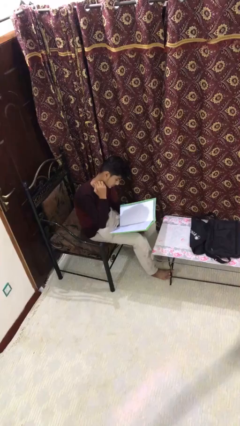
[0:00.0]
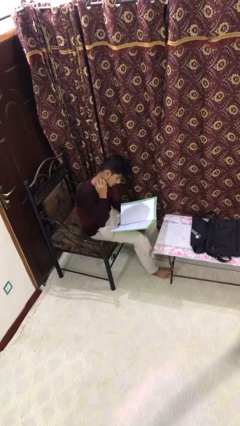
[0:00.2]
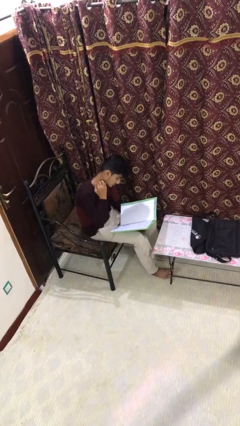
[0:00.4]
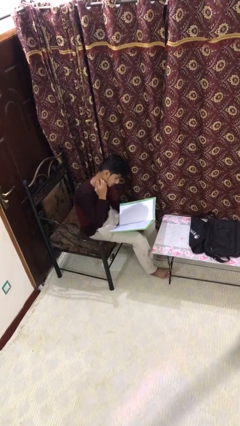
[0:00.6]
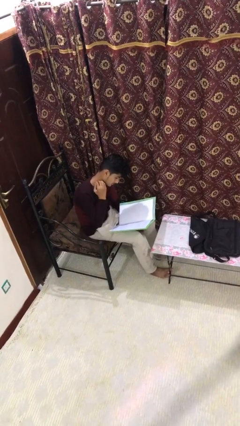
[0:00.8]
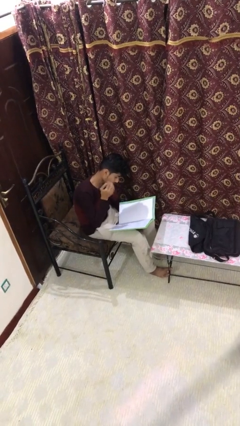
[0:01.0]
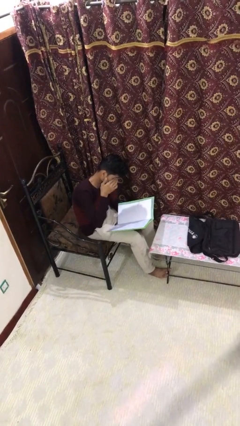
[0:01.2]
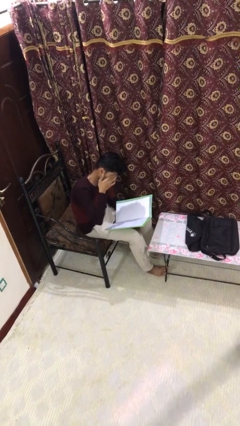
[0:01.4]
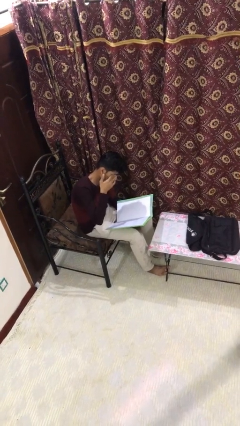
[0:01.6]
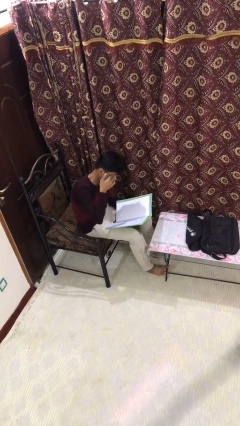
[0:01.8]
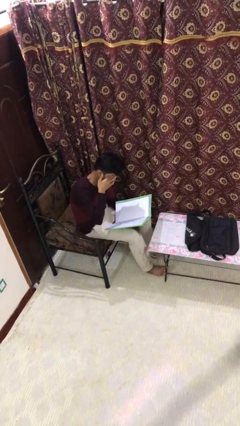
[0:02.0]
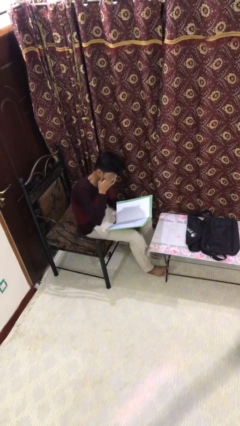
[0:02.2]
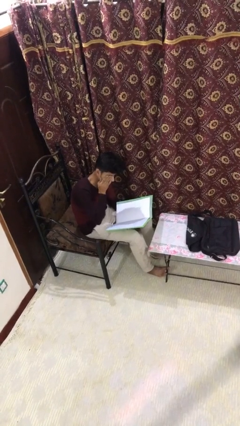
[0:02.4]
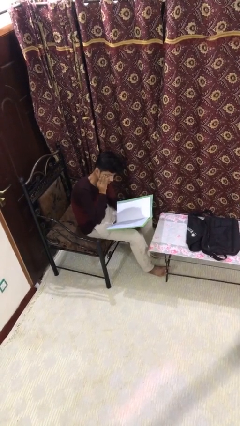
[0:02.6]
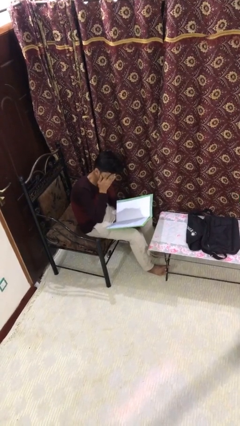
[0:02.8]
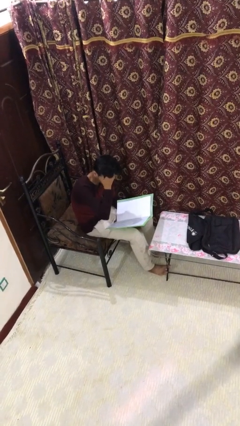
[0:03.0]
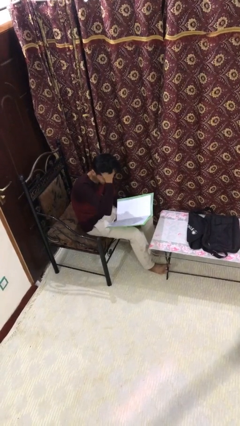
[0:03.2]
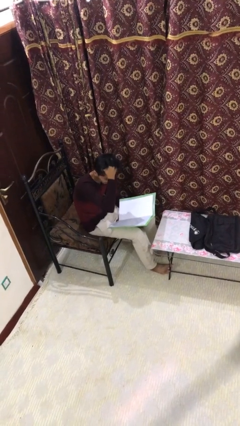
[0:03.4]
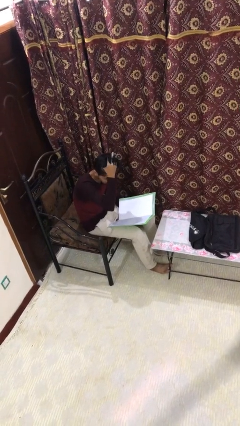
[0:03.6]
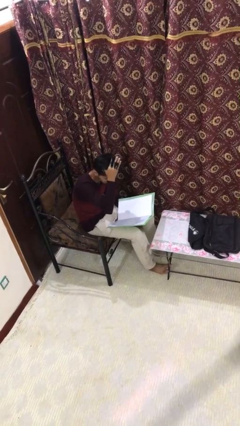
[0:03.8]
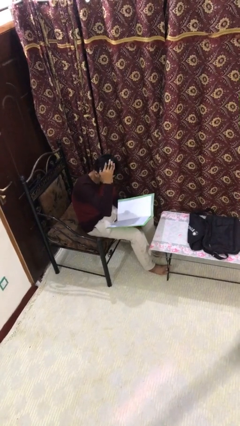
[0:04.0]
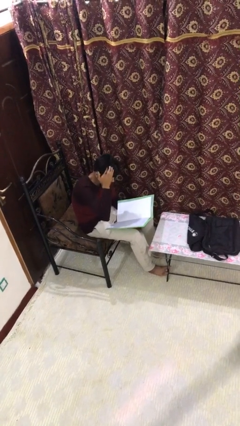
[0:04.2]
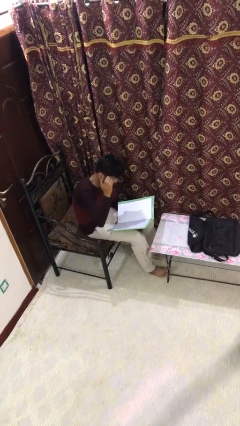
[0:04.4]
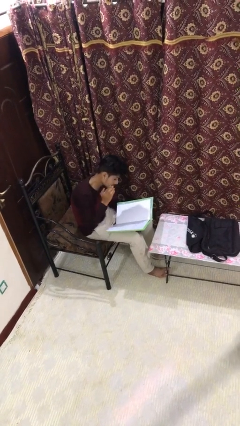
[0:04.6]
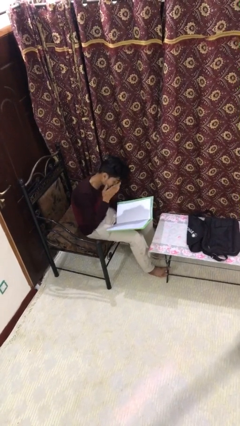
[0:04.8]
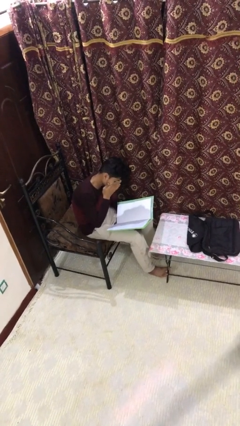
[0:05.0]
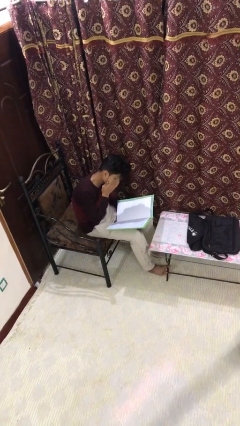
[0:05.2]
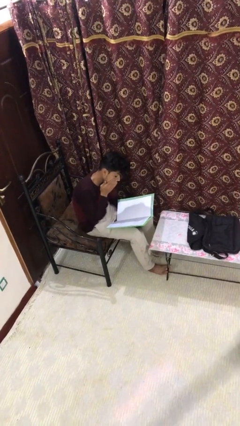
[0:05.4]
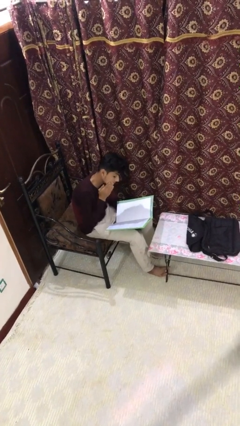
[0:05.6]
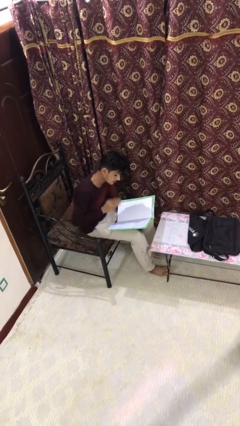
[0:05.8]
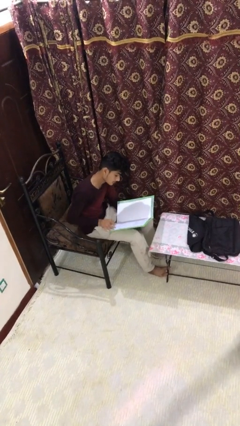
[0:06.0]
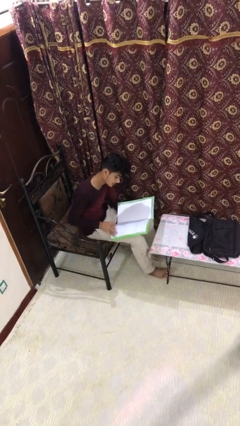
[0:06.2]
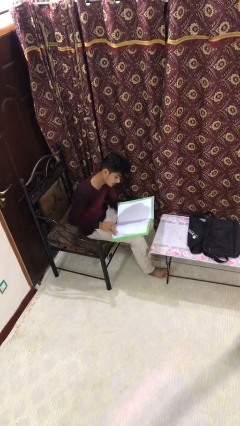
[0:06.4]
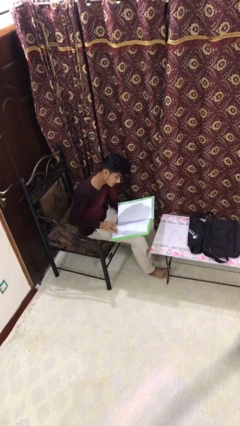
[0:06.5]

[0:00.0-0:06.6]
person reads document

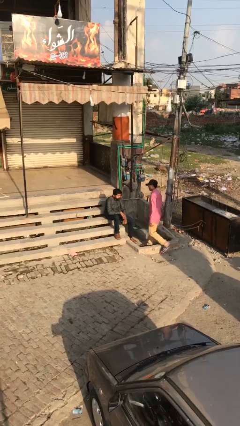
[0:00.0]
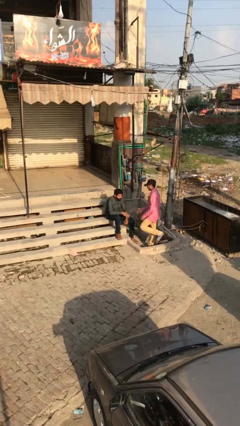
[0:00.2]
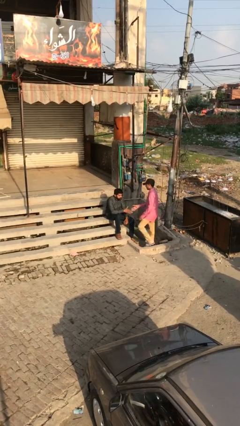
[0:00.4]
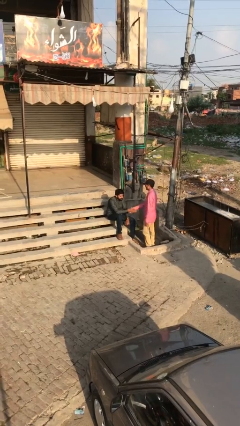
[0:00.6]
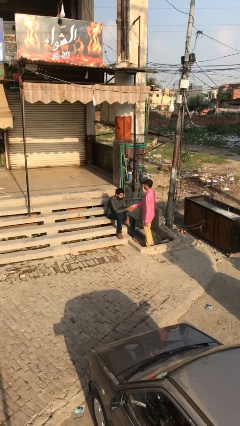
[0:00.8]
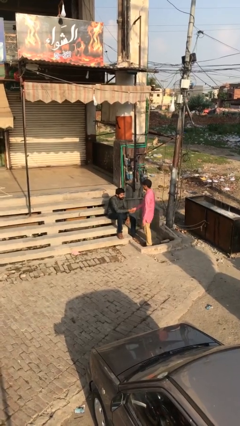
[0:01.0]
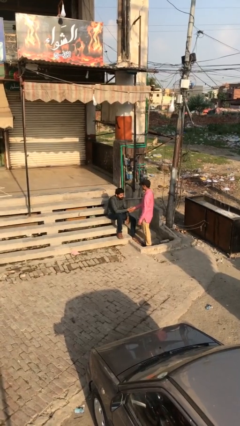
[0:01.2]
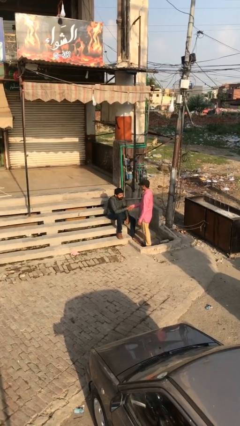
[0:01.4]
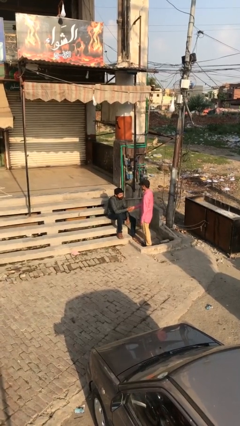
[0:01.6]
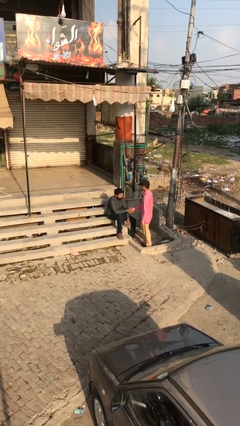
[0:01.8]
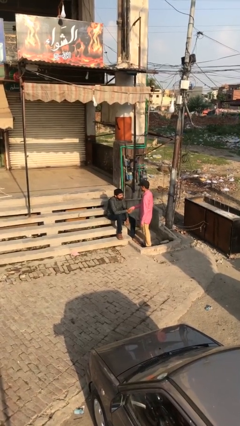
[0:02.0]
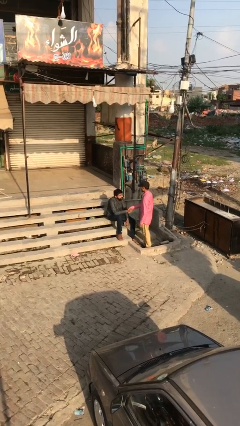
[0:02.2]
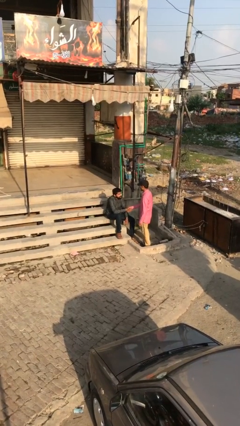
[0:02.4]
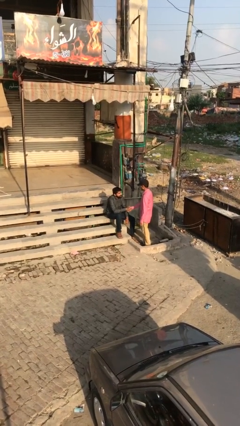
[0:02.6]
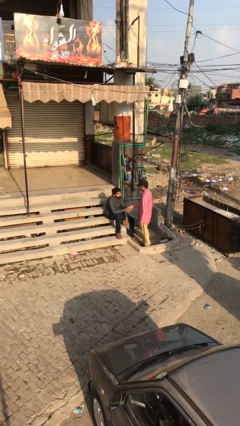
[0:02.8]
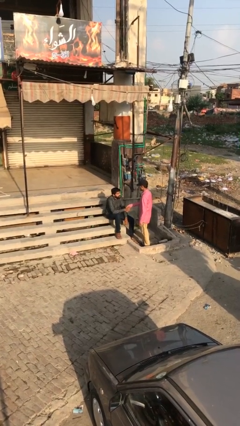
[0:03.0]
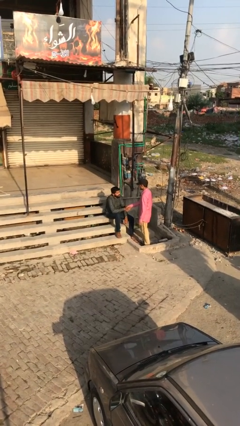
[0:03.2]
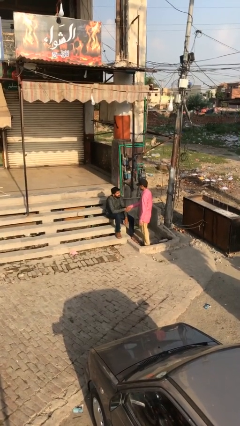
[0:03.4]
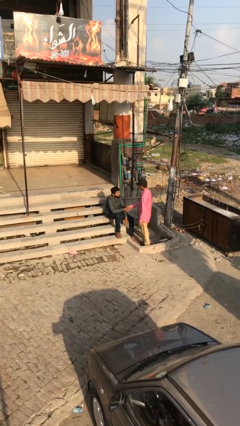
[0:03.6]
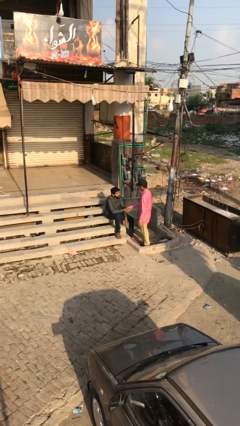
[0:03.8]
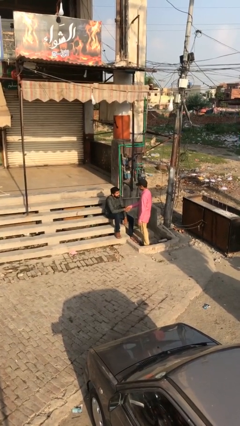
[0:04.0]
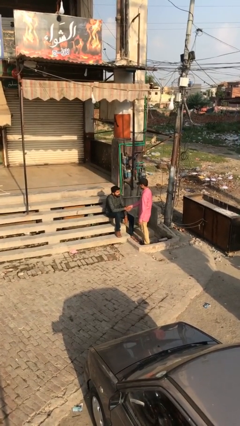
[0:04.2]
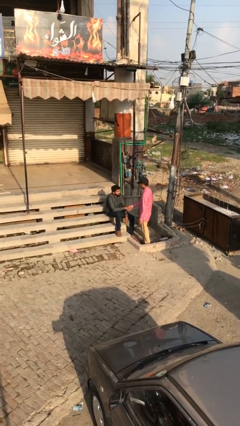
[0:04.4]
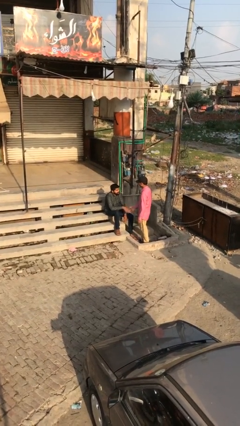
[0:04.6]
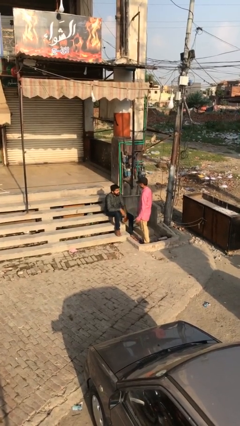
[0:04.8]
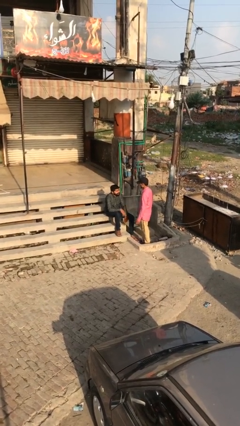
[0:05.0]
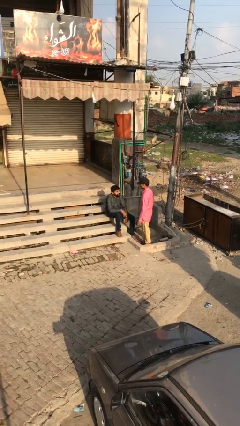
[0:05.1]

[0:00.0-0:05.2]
person shakes hand

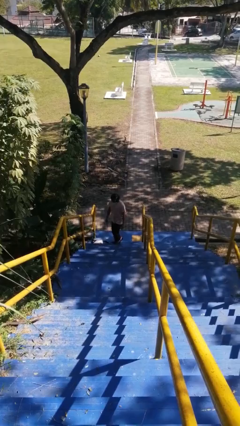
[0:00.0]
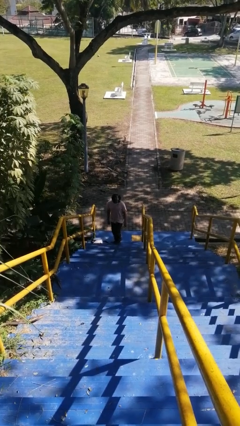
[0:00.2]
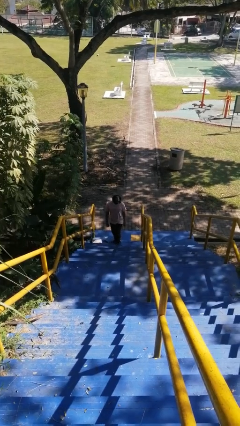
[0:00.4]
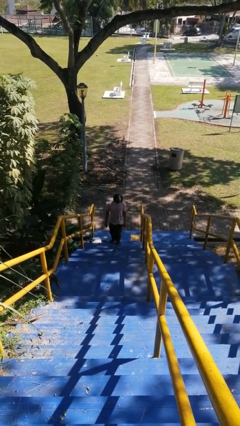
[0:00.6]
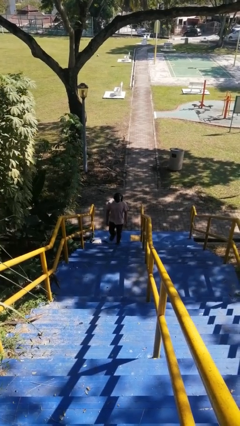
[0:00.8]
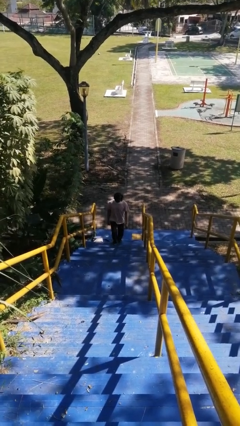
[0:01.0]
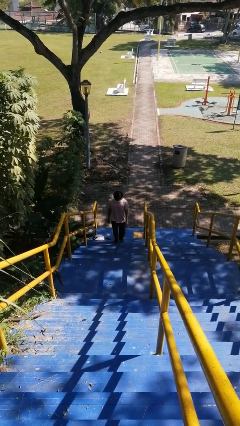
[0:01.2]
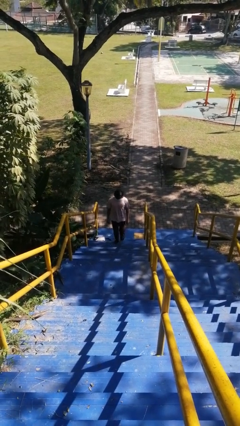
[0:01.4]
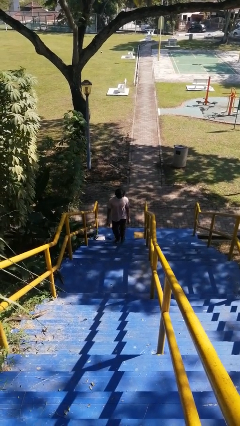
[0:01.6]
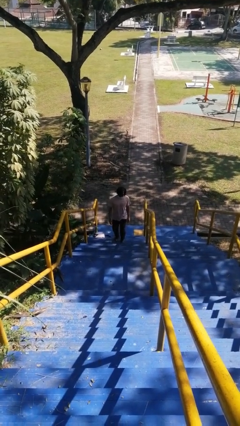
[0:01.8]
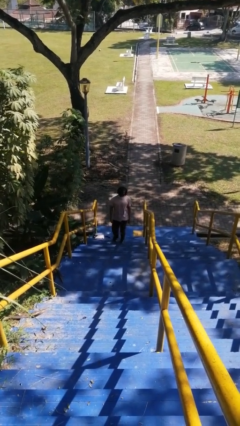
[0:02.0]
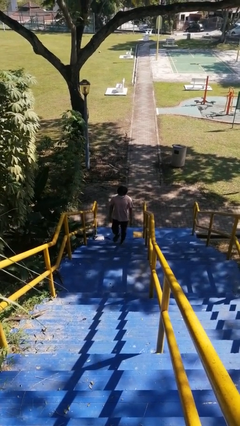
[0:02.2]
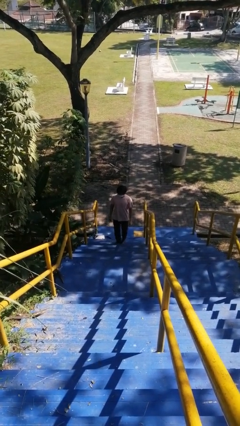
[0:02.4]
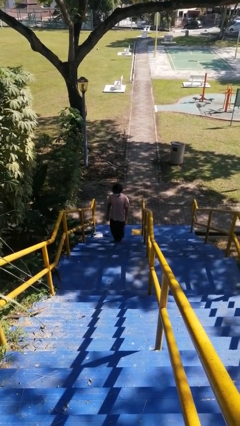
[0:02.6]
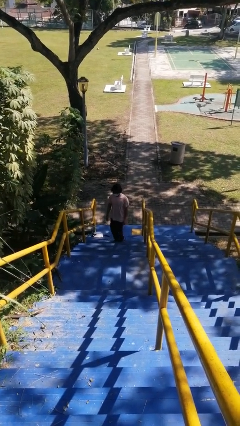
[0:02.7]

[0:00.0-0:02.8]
person climbs up stairs

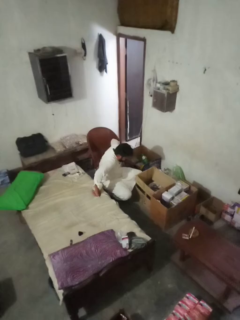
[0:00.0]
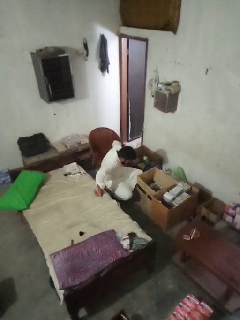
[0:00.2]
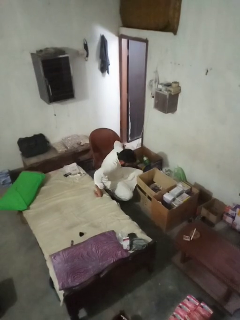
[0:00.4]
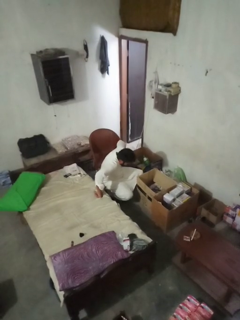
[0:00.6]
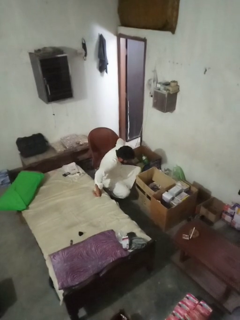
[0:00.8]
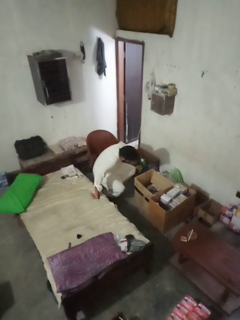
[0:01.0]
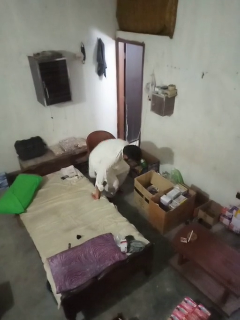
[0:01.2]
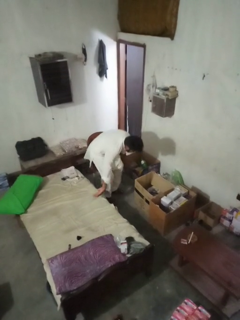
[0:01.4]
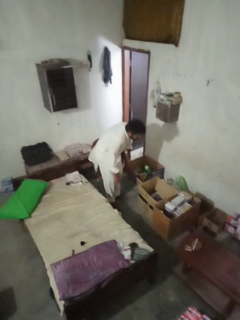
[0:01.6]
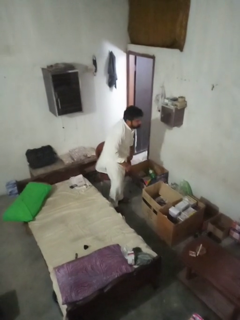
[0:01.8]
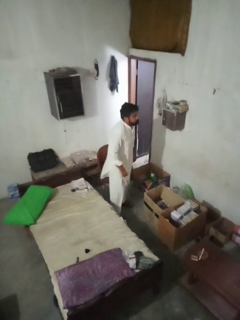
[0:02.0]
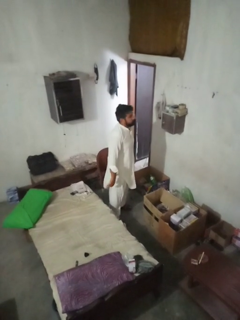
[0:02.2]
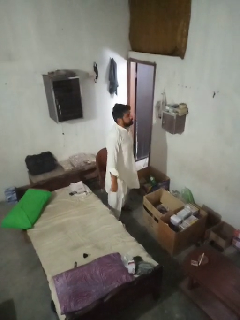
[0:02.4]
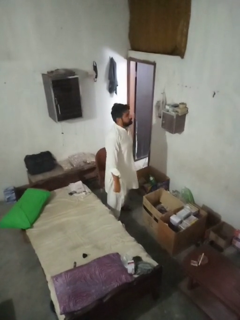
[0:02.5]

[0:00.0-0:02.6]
person stands up from floor

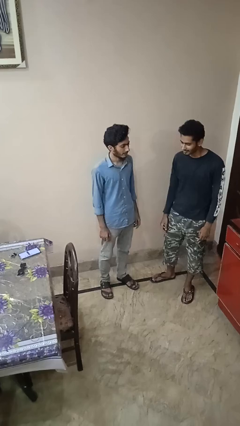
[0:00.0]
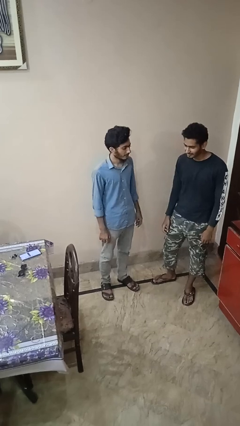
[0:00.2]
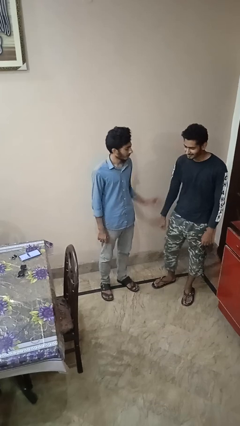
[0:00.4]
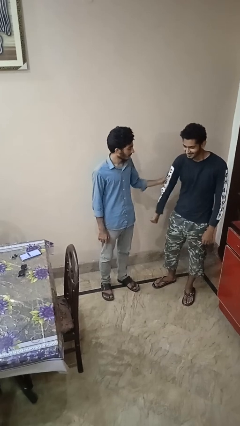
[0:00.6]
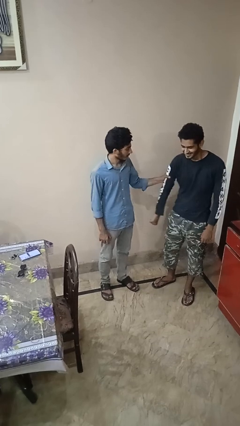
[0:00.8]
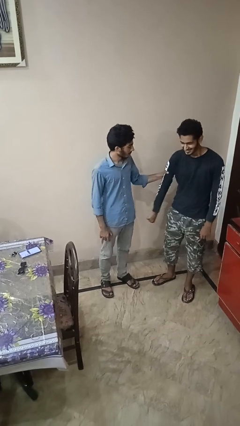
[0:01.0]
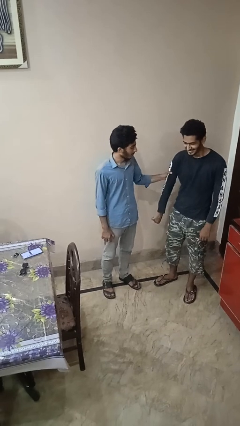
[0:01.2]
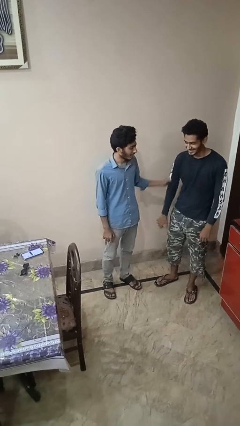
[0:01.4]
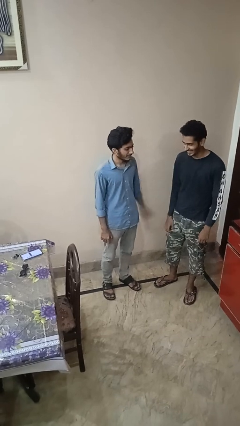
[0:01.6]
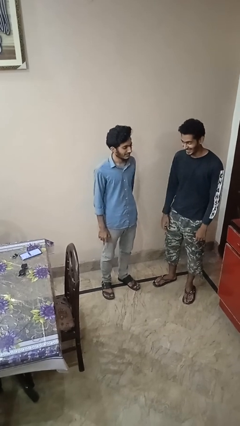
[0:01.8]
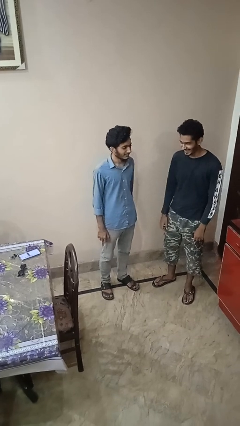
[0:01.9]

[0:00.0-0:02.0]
person grabs person by bicep
